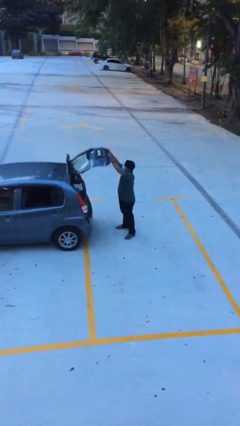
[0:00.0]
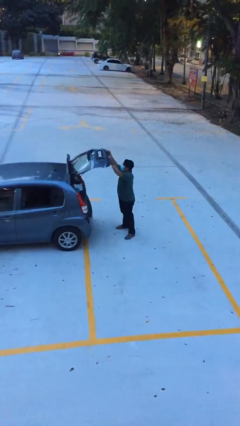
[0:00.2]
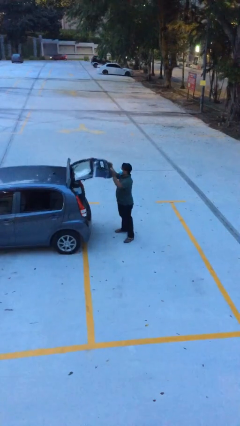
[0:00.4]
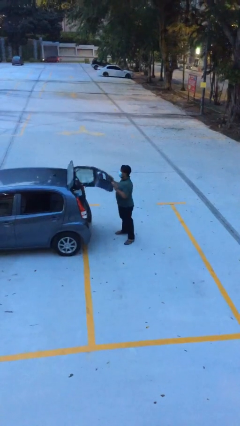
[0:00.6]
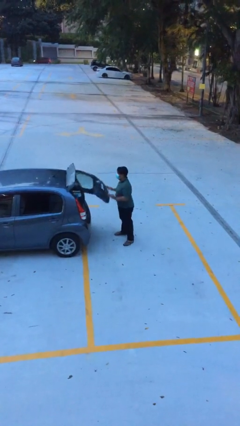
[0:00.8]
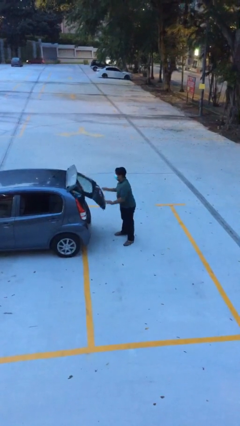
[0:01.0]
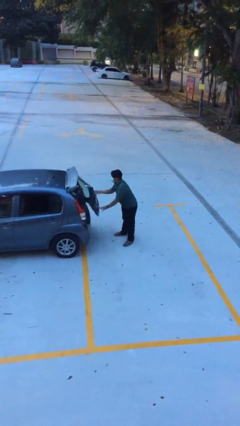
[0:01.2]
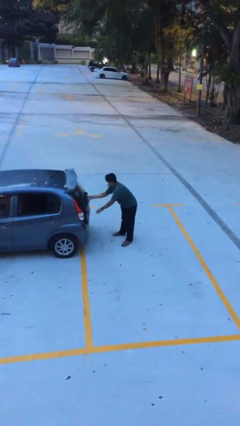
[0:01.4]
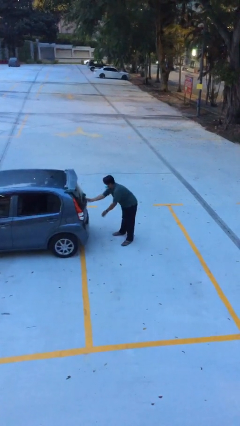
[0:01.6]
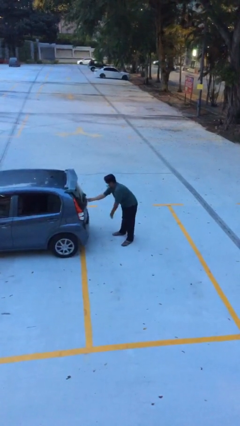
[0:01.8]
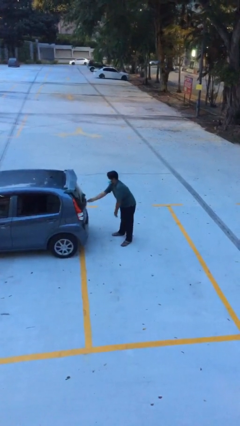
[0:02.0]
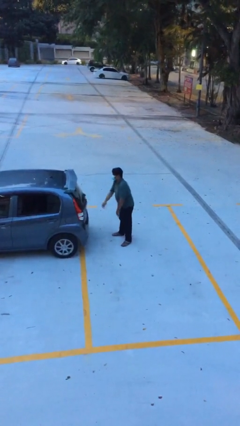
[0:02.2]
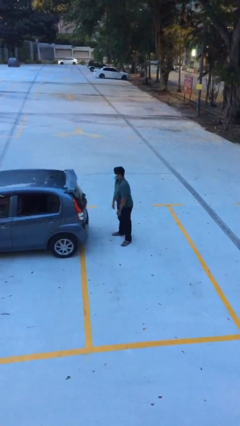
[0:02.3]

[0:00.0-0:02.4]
person closes car trunk

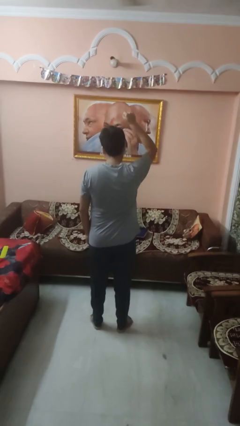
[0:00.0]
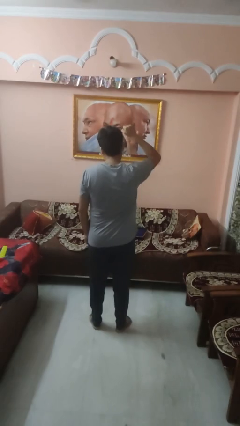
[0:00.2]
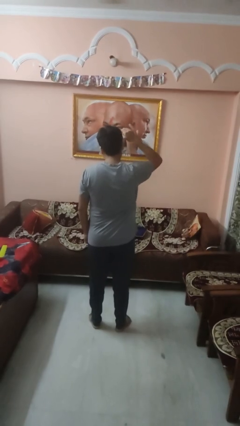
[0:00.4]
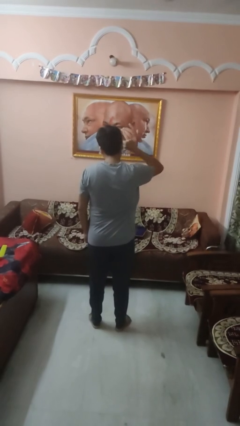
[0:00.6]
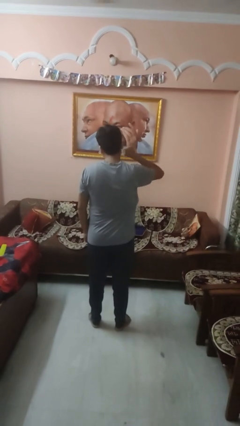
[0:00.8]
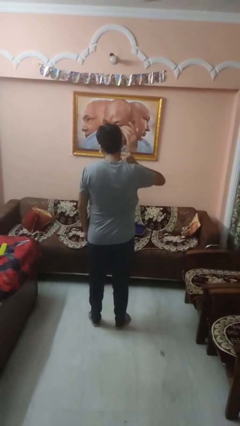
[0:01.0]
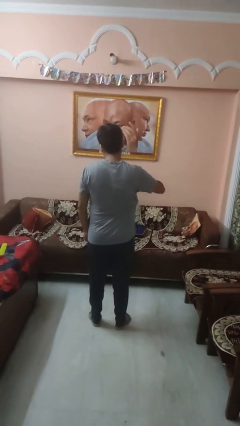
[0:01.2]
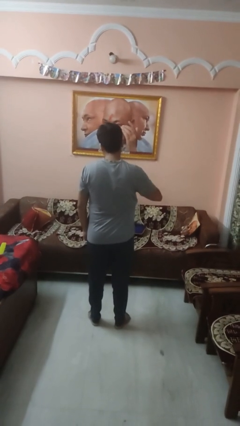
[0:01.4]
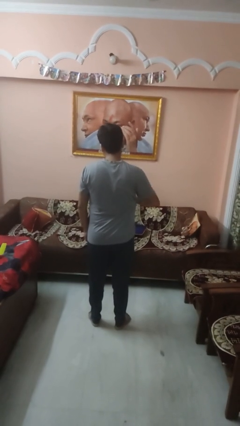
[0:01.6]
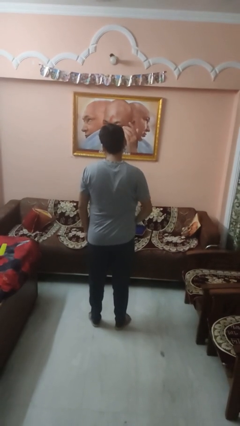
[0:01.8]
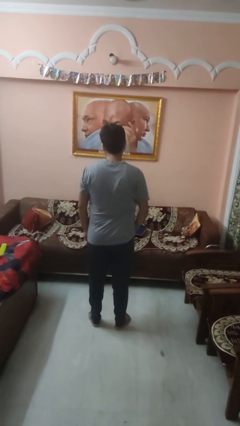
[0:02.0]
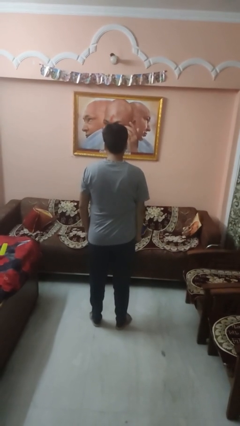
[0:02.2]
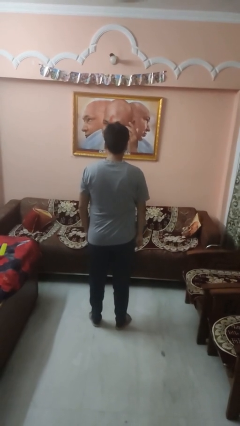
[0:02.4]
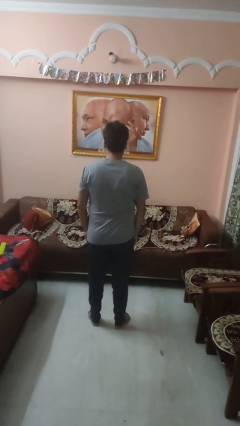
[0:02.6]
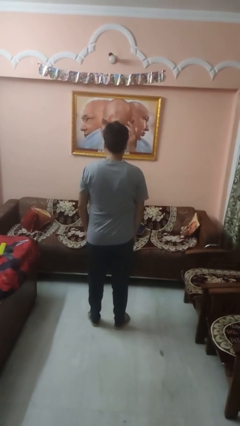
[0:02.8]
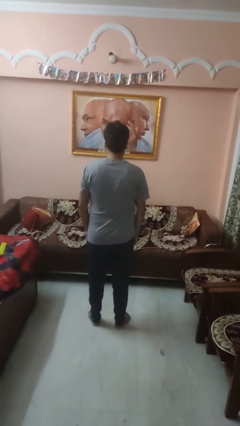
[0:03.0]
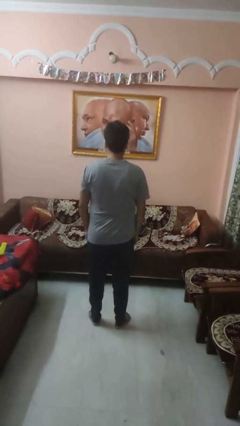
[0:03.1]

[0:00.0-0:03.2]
person gestures lower hand

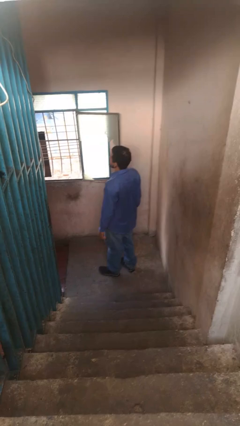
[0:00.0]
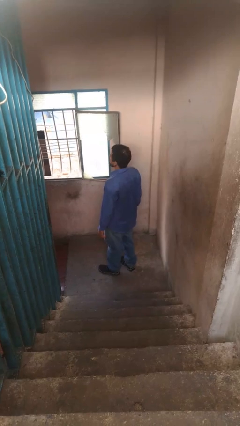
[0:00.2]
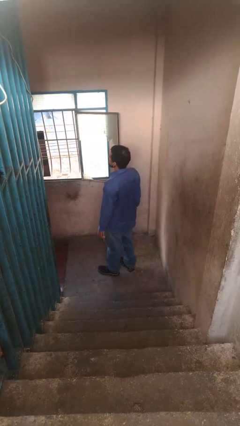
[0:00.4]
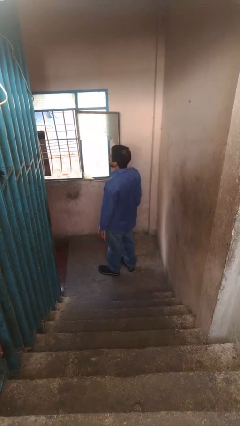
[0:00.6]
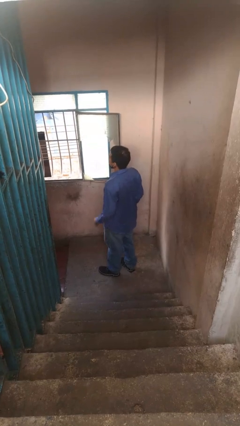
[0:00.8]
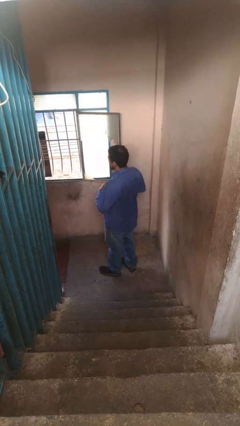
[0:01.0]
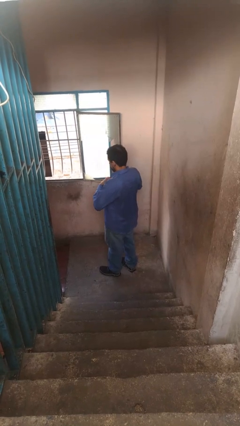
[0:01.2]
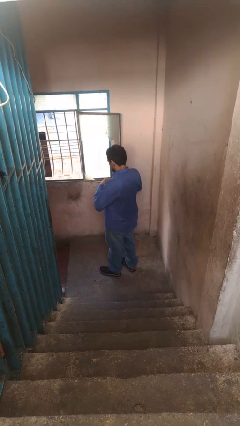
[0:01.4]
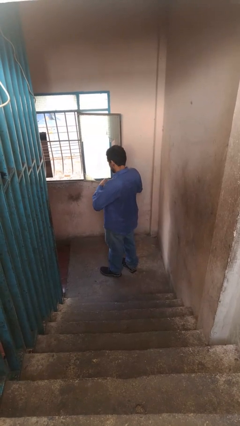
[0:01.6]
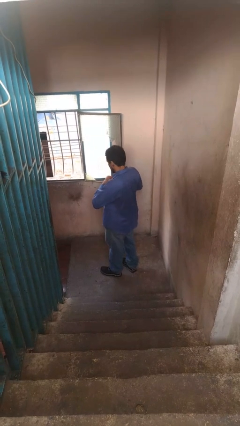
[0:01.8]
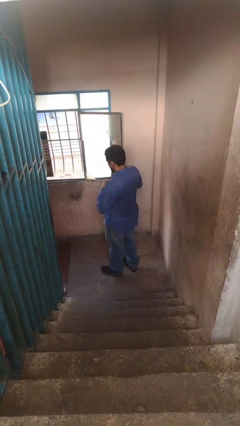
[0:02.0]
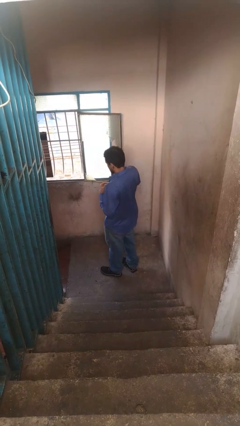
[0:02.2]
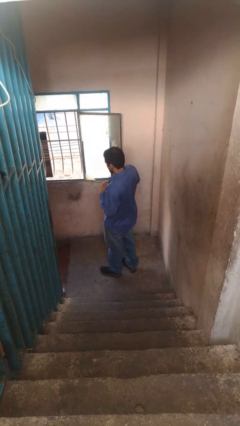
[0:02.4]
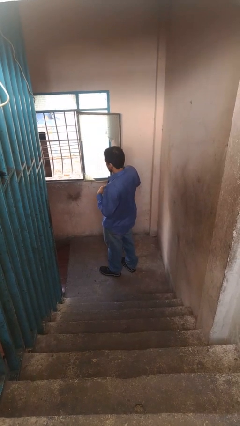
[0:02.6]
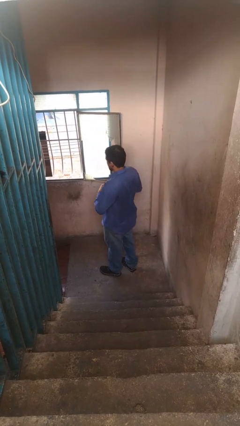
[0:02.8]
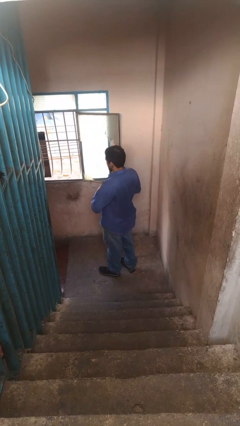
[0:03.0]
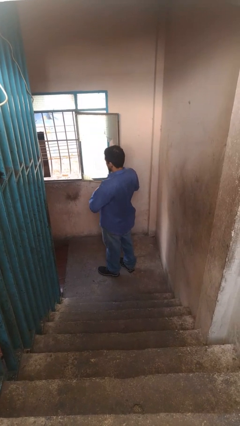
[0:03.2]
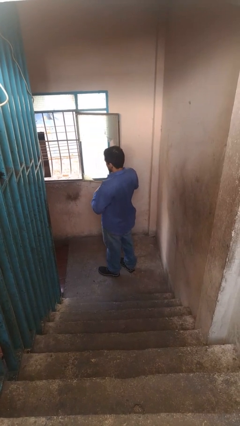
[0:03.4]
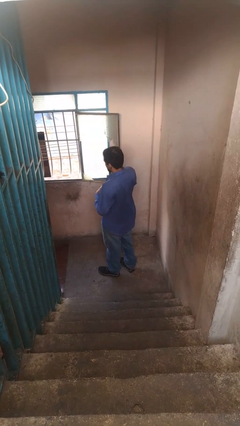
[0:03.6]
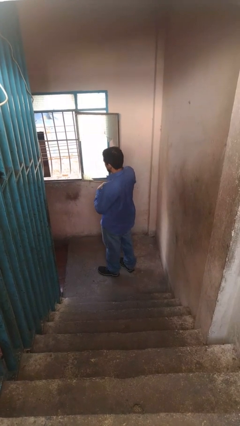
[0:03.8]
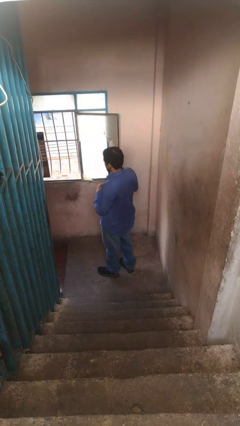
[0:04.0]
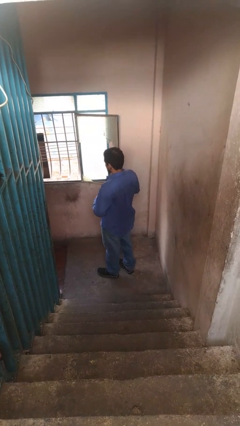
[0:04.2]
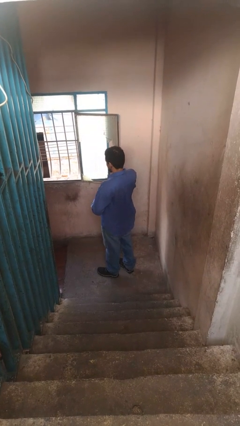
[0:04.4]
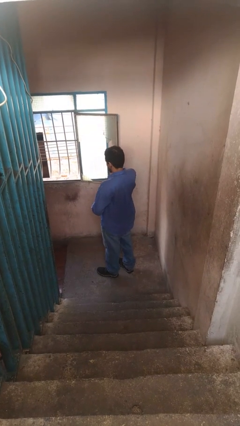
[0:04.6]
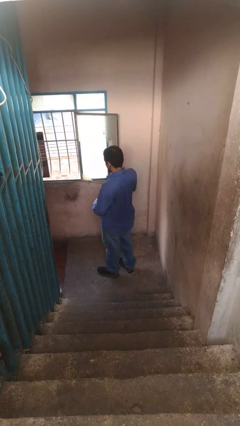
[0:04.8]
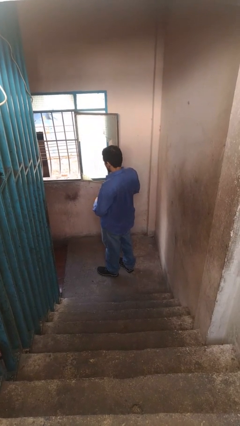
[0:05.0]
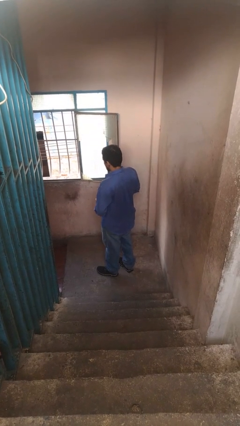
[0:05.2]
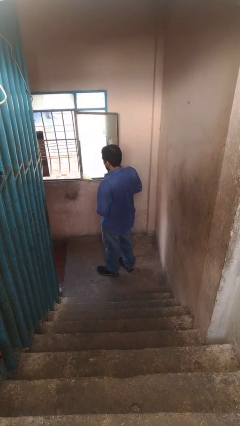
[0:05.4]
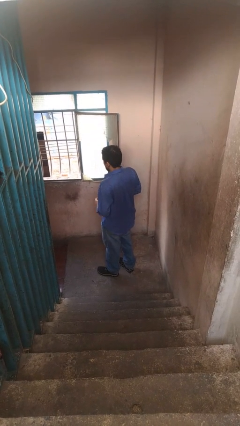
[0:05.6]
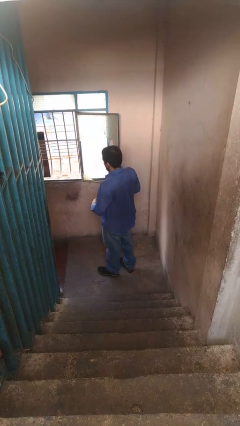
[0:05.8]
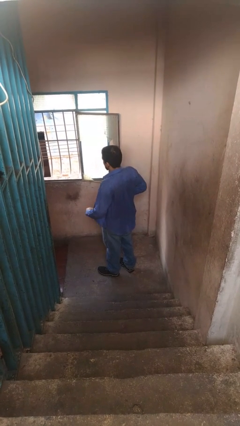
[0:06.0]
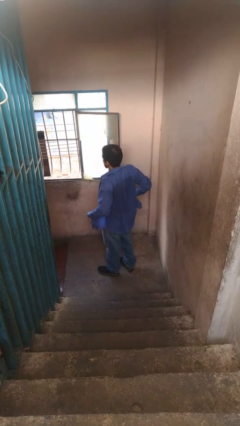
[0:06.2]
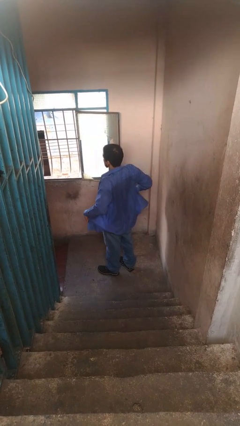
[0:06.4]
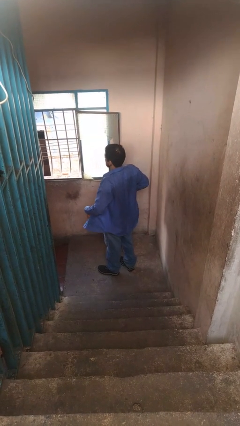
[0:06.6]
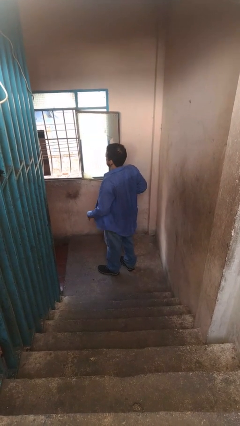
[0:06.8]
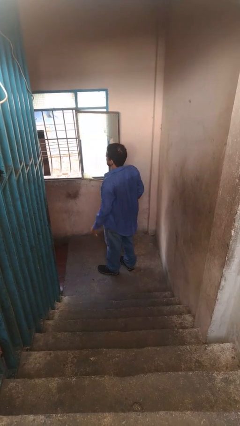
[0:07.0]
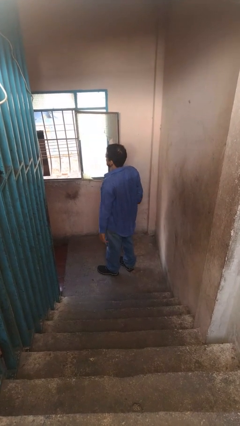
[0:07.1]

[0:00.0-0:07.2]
person unbuttons shirt

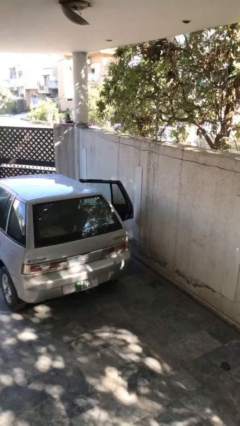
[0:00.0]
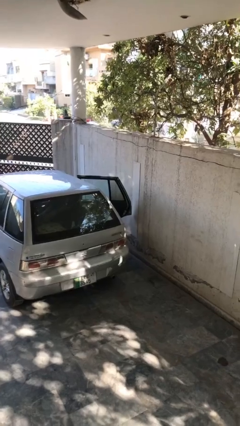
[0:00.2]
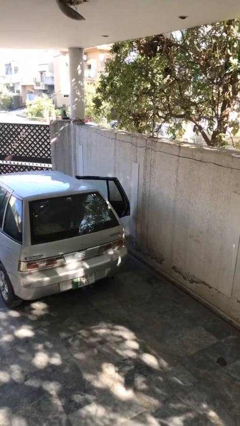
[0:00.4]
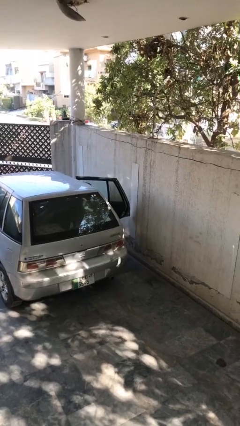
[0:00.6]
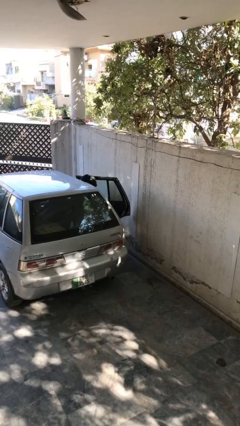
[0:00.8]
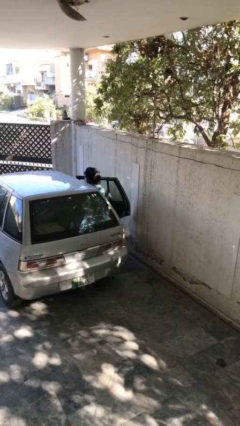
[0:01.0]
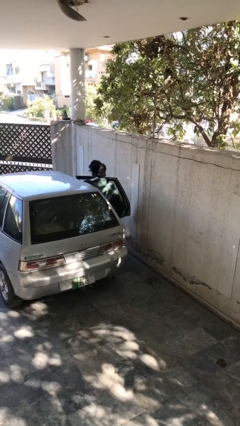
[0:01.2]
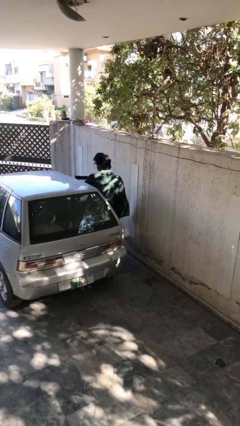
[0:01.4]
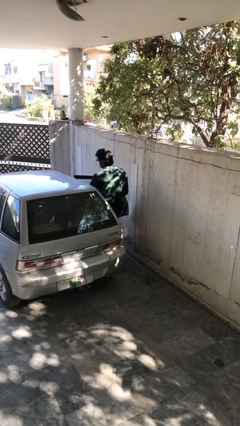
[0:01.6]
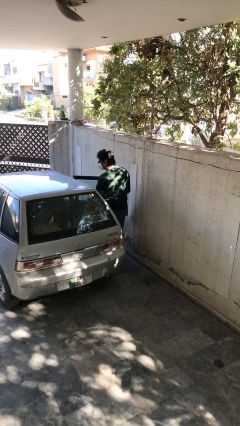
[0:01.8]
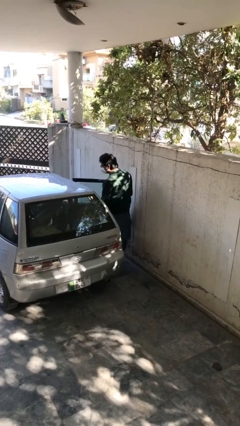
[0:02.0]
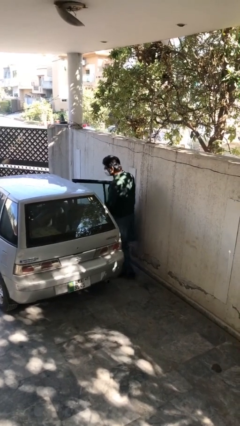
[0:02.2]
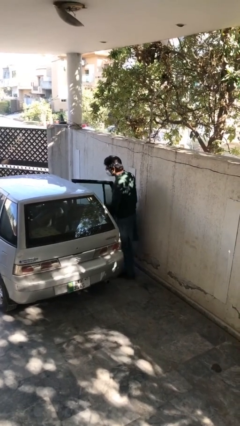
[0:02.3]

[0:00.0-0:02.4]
person exits car

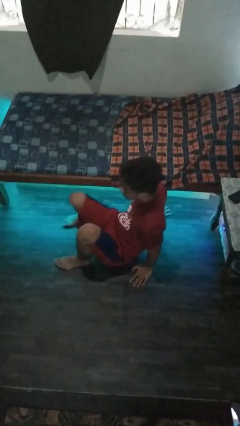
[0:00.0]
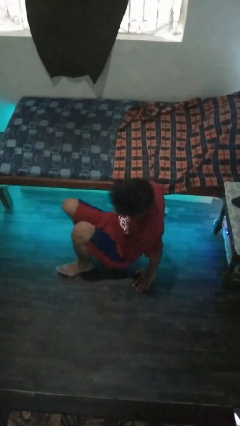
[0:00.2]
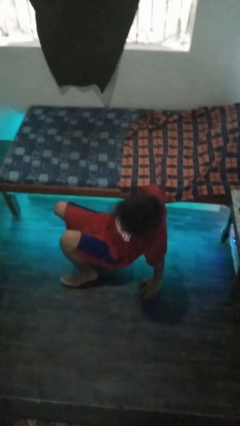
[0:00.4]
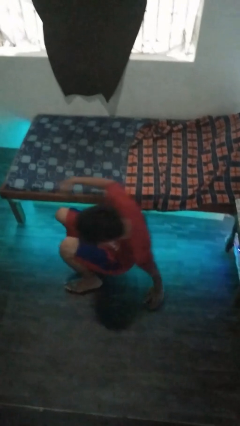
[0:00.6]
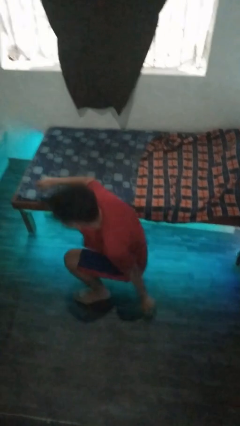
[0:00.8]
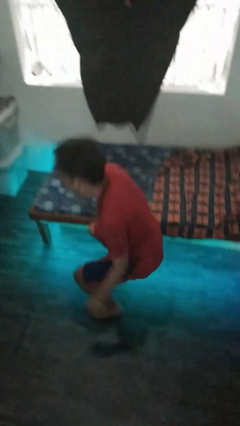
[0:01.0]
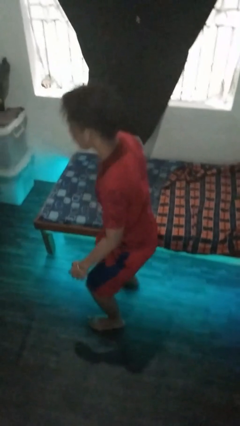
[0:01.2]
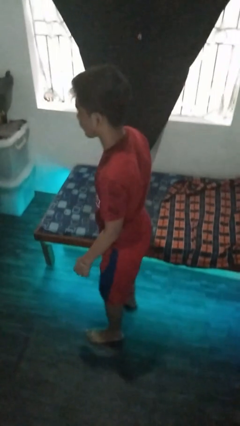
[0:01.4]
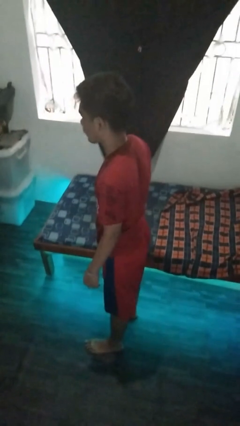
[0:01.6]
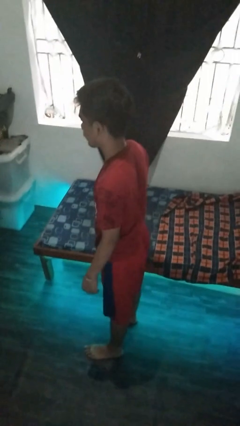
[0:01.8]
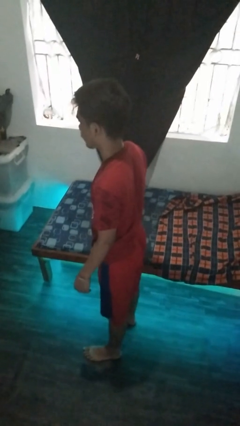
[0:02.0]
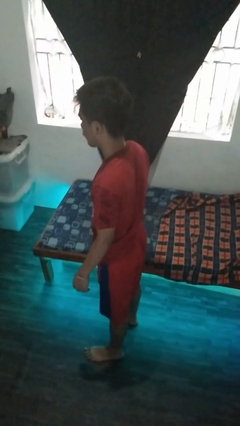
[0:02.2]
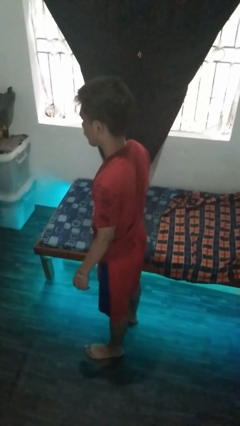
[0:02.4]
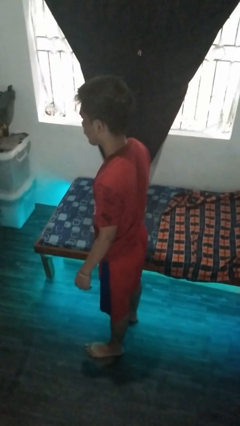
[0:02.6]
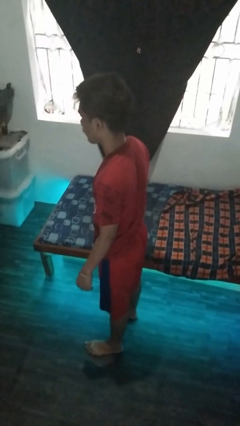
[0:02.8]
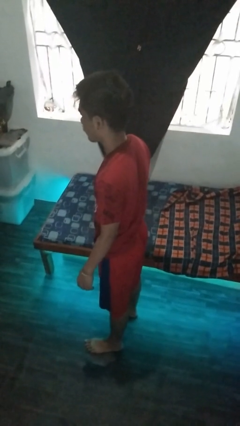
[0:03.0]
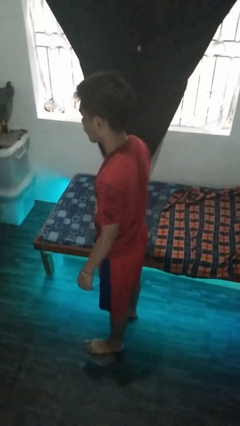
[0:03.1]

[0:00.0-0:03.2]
person stands up from floor
